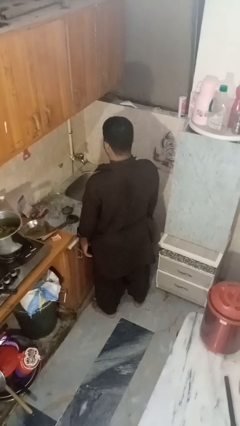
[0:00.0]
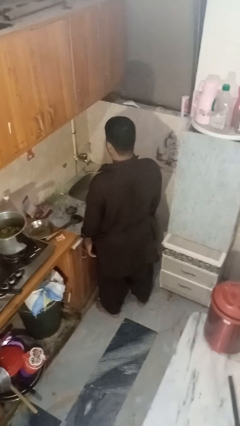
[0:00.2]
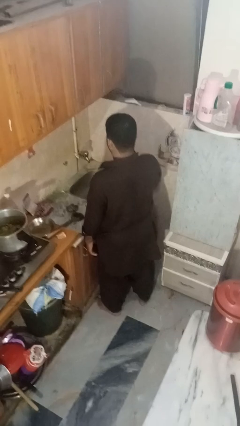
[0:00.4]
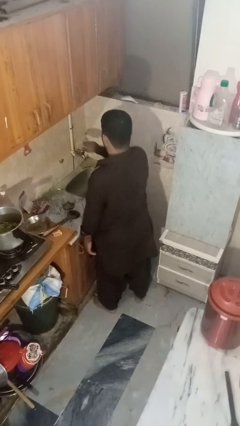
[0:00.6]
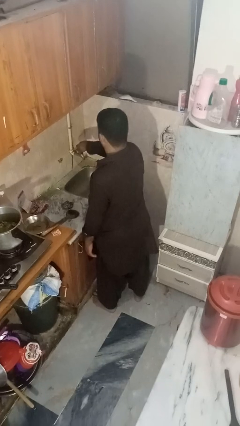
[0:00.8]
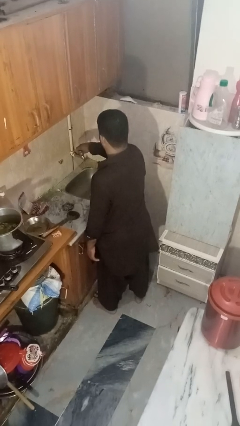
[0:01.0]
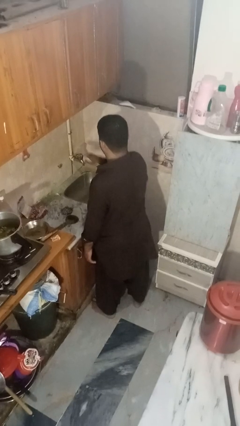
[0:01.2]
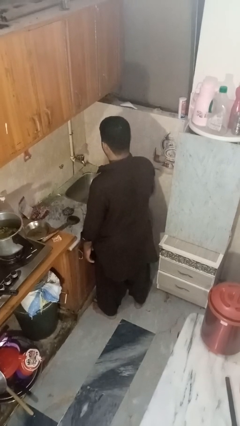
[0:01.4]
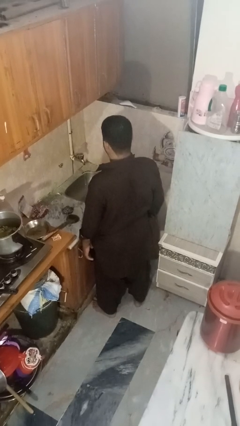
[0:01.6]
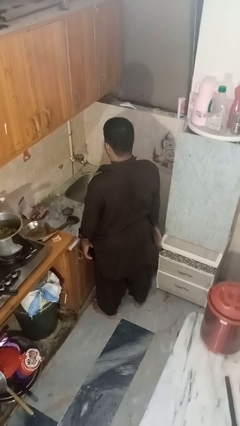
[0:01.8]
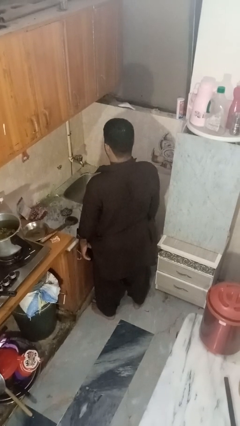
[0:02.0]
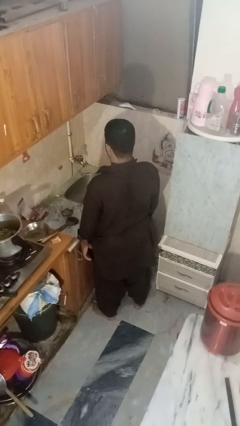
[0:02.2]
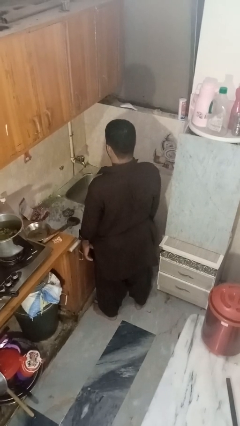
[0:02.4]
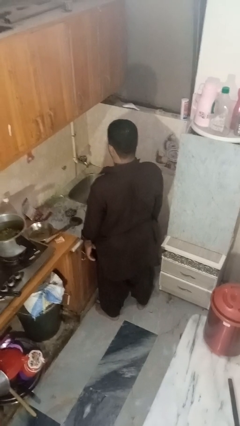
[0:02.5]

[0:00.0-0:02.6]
person turns on faucet

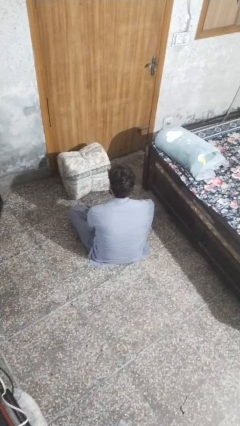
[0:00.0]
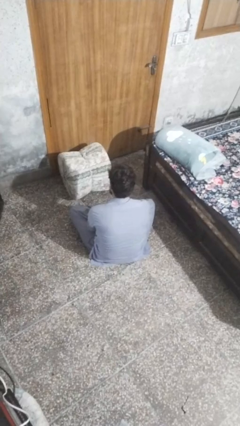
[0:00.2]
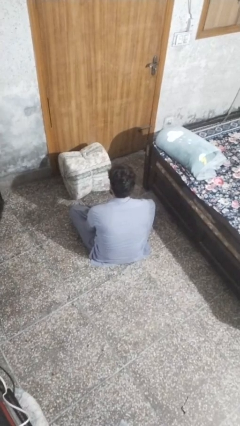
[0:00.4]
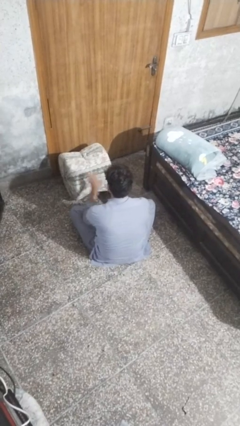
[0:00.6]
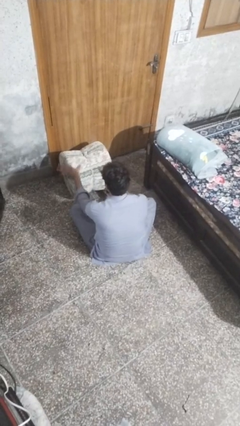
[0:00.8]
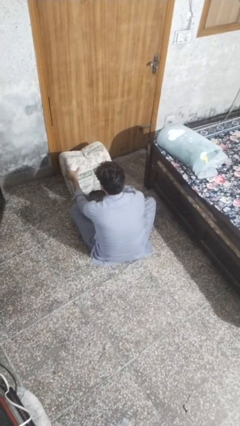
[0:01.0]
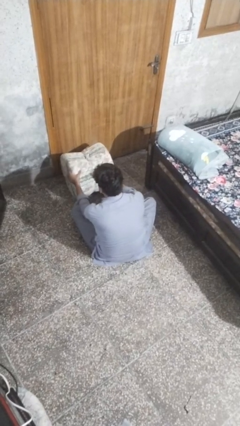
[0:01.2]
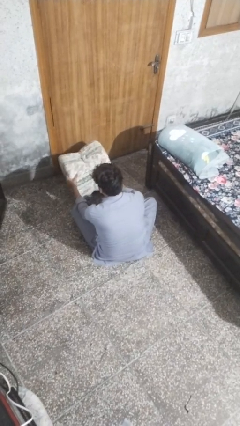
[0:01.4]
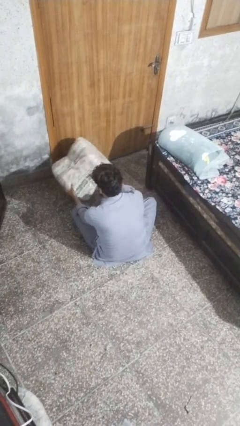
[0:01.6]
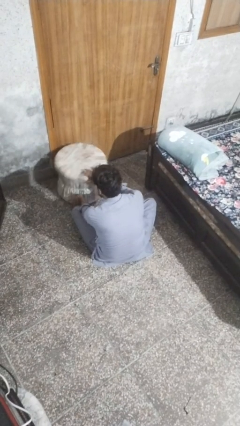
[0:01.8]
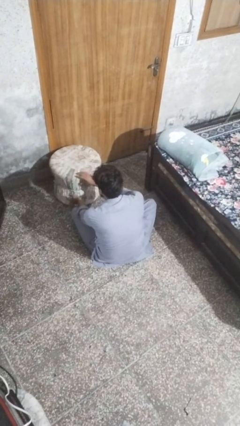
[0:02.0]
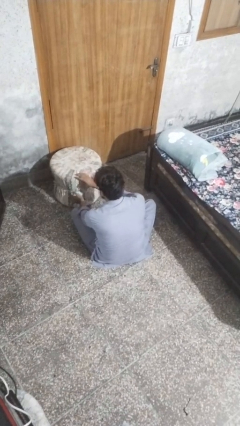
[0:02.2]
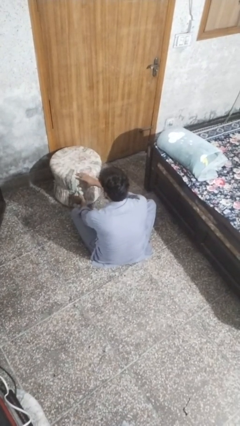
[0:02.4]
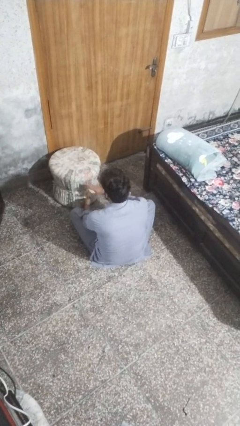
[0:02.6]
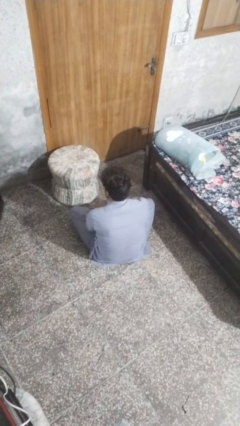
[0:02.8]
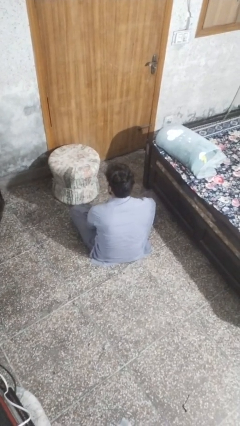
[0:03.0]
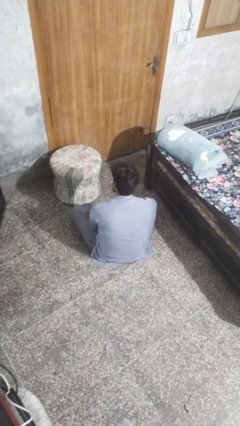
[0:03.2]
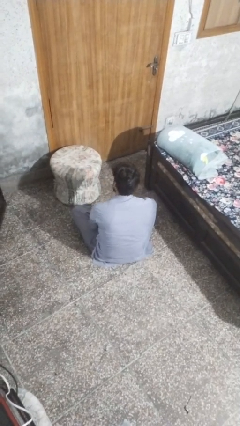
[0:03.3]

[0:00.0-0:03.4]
person sets upright furniture

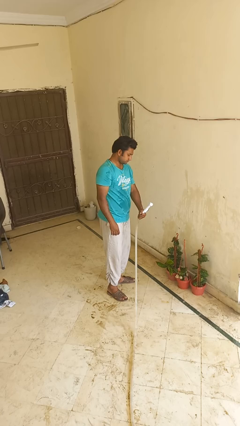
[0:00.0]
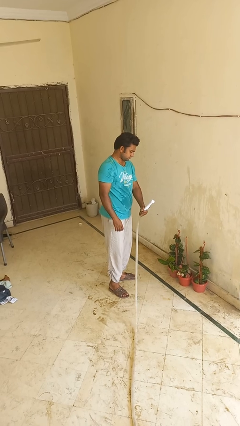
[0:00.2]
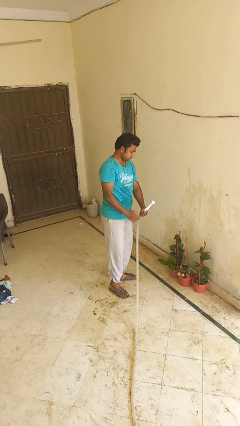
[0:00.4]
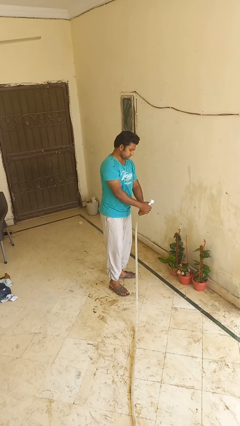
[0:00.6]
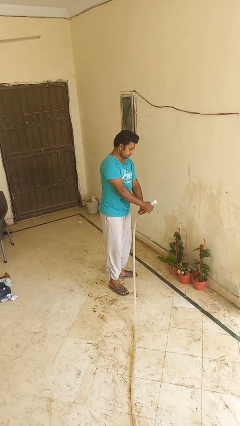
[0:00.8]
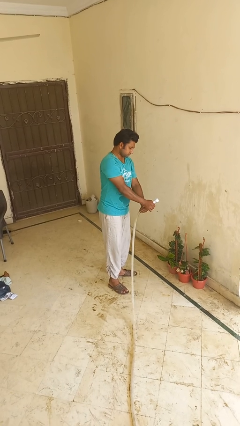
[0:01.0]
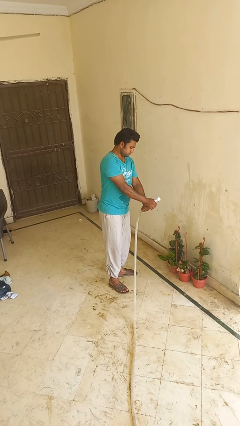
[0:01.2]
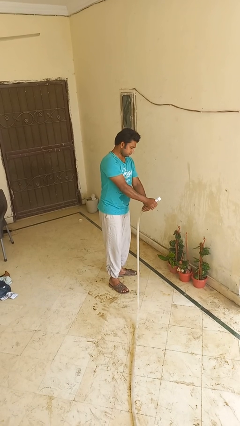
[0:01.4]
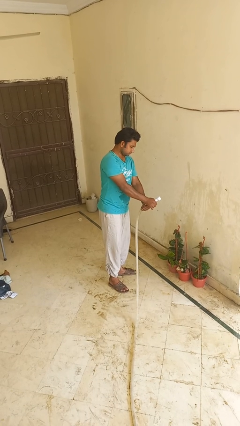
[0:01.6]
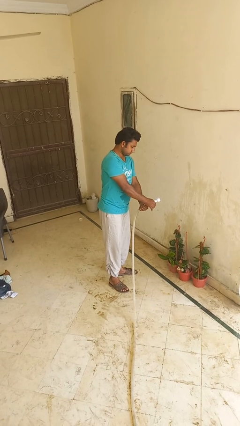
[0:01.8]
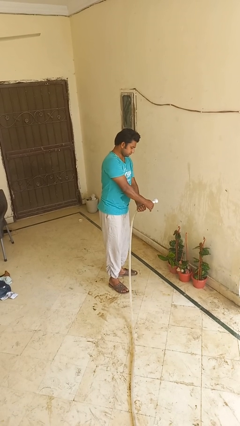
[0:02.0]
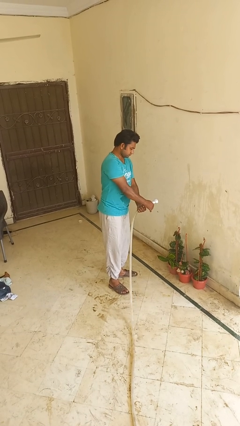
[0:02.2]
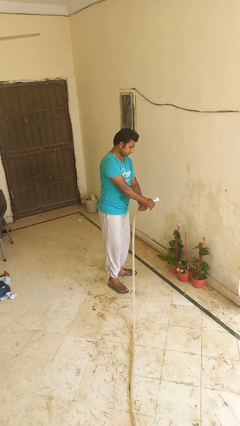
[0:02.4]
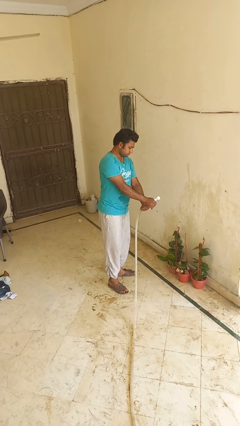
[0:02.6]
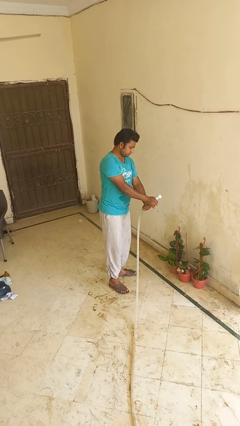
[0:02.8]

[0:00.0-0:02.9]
person waters houseplant

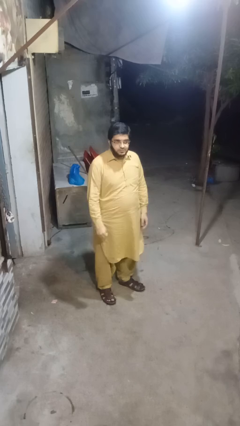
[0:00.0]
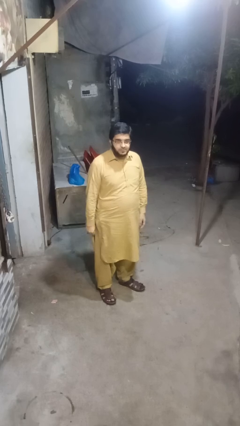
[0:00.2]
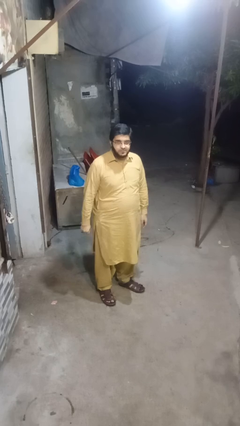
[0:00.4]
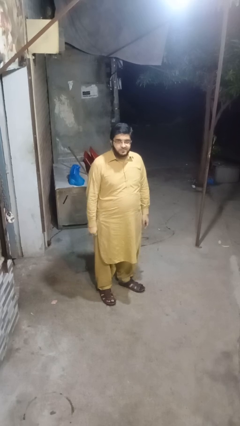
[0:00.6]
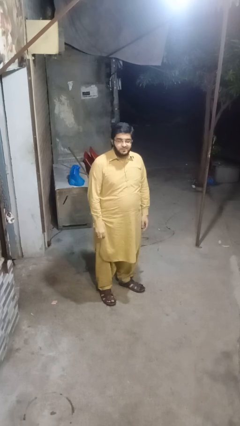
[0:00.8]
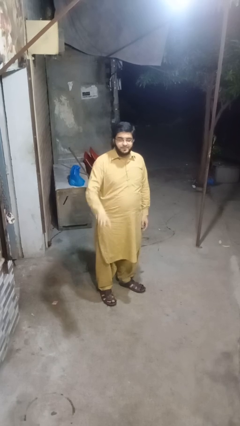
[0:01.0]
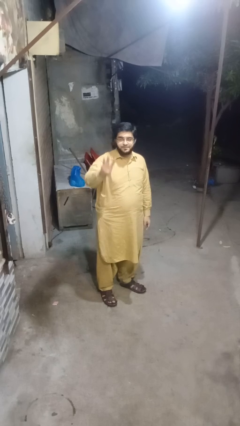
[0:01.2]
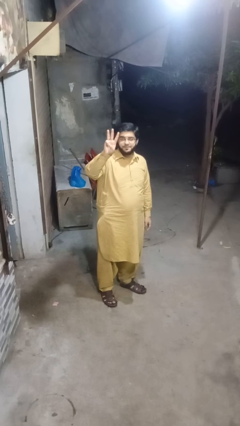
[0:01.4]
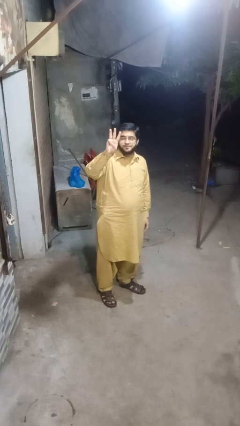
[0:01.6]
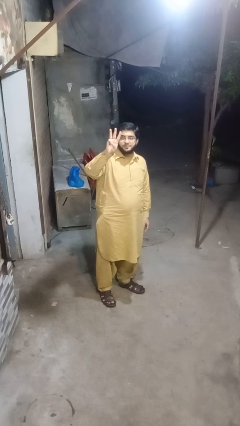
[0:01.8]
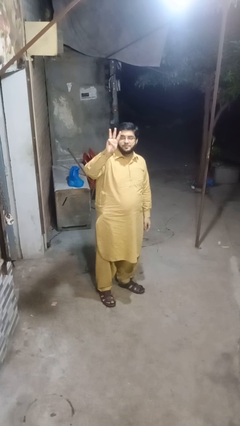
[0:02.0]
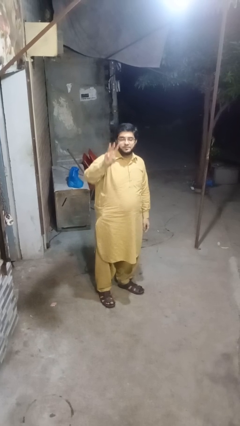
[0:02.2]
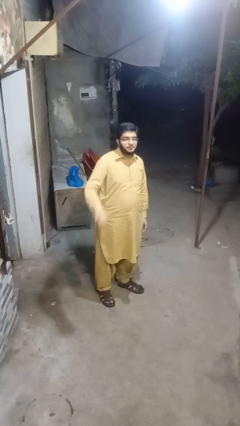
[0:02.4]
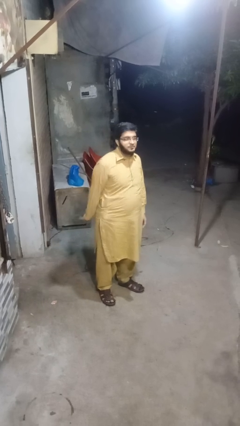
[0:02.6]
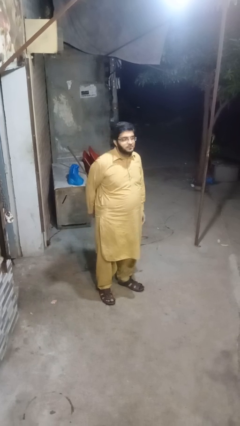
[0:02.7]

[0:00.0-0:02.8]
person gestures number three

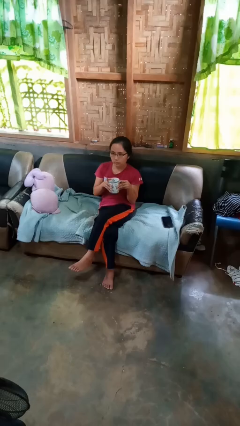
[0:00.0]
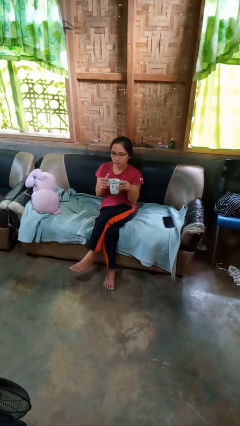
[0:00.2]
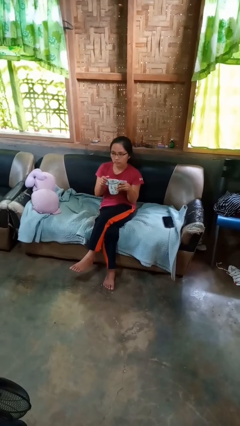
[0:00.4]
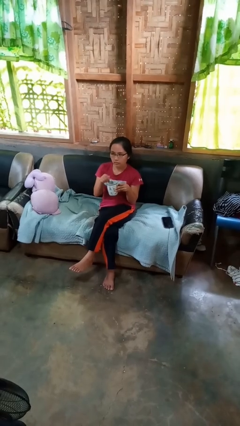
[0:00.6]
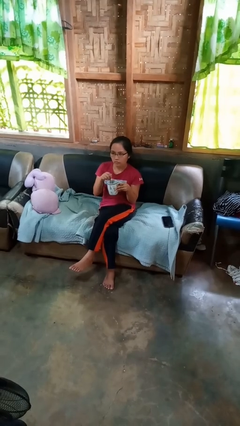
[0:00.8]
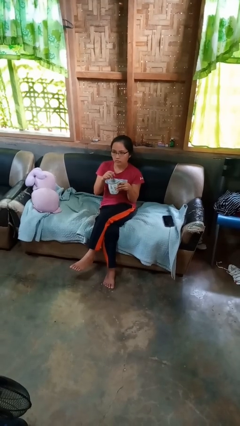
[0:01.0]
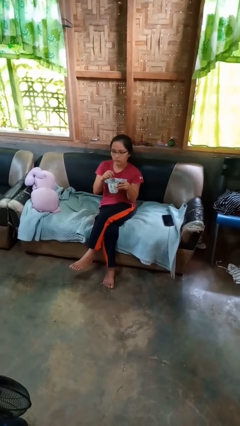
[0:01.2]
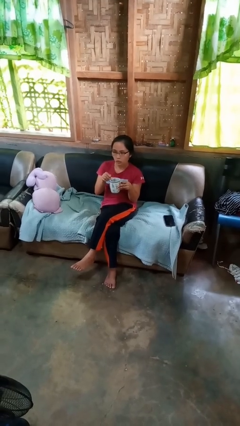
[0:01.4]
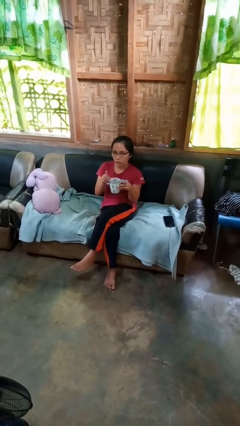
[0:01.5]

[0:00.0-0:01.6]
person stirs mug

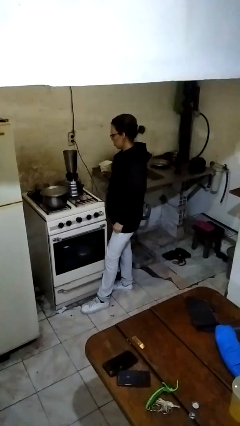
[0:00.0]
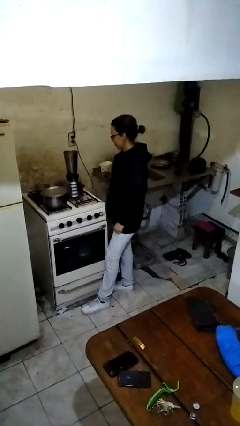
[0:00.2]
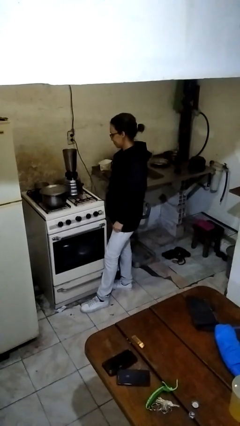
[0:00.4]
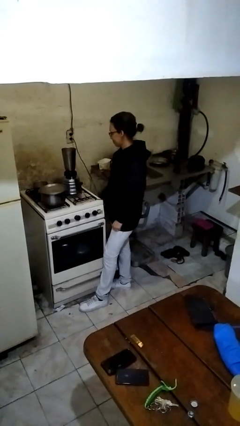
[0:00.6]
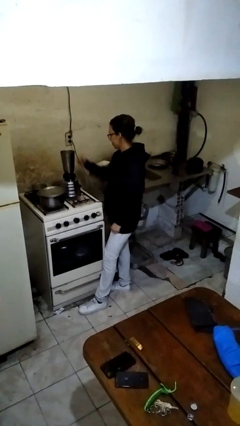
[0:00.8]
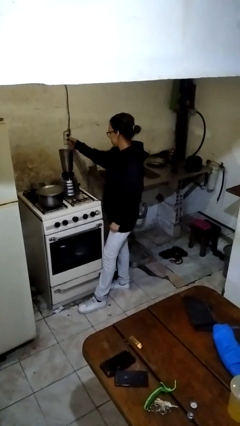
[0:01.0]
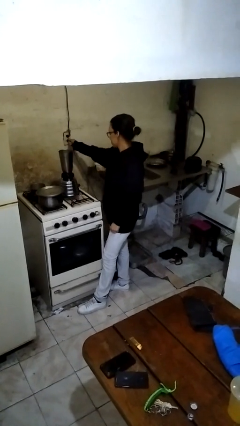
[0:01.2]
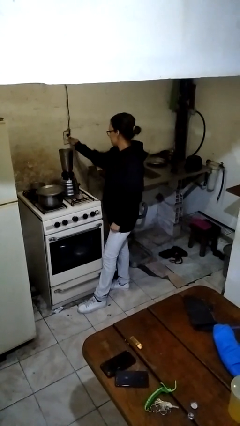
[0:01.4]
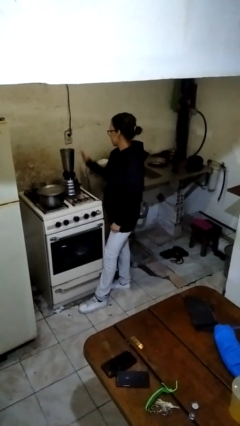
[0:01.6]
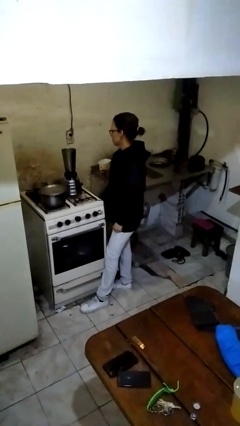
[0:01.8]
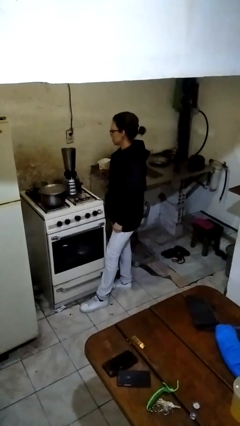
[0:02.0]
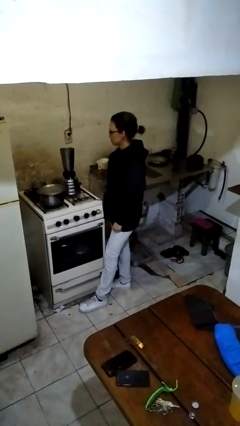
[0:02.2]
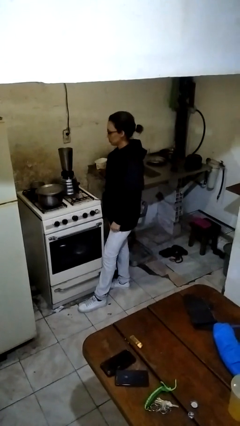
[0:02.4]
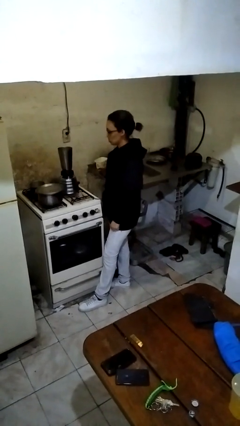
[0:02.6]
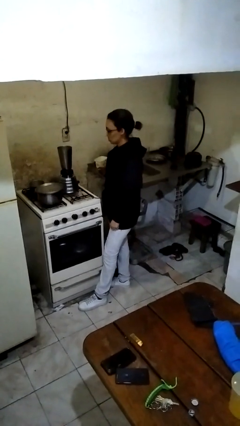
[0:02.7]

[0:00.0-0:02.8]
person unplugs from electrical socket

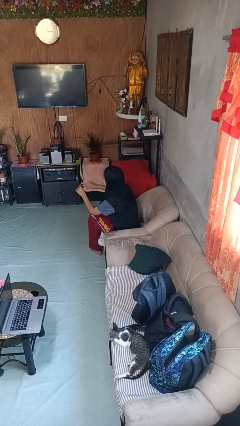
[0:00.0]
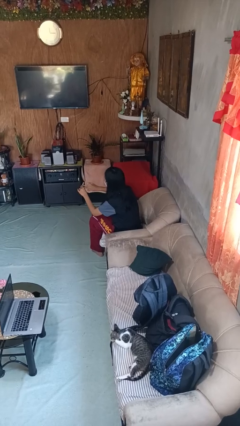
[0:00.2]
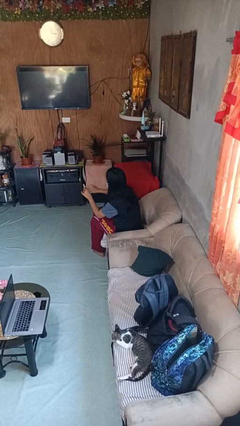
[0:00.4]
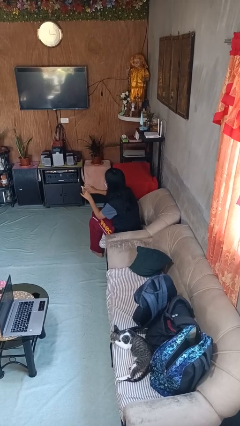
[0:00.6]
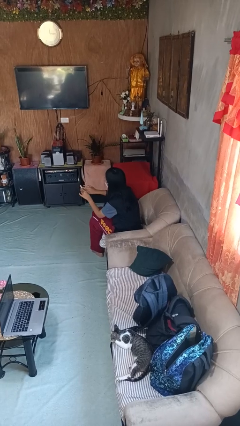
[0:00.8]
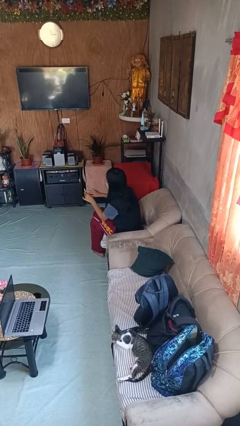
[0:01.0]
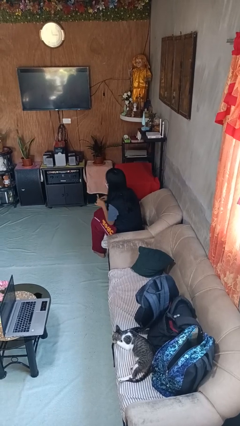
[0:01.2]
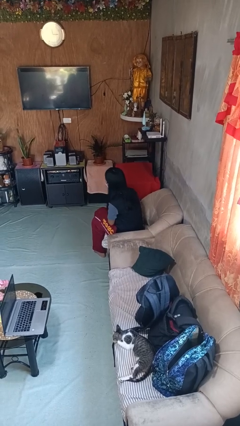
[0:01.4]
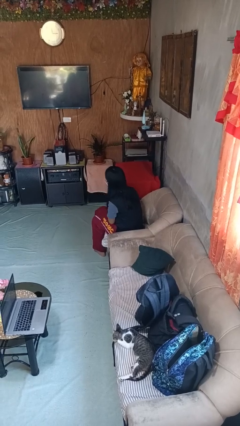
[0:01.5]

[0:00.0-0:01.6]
person files fingernails
